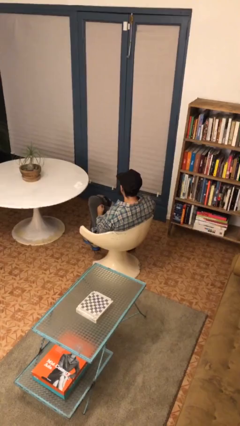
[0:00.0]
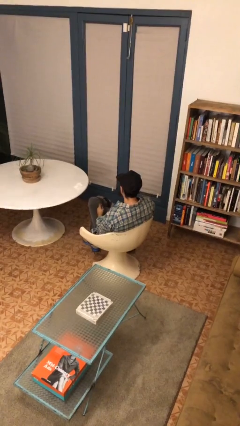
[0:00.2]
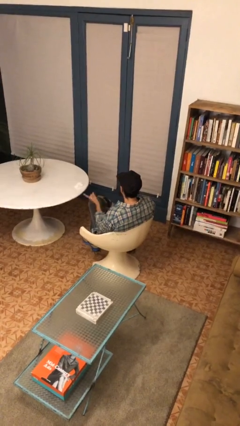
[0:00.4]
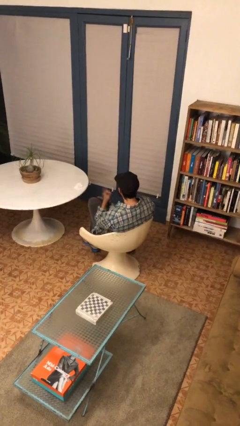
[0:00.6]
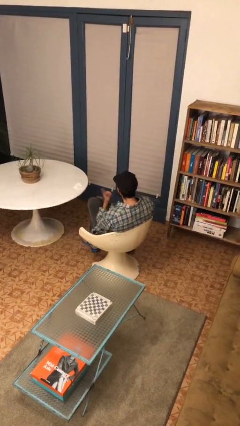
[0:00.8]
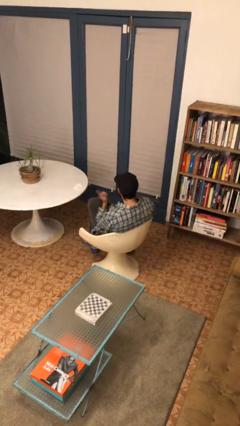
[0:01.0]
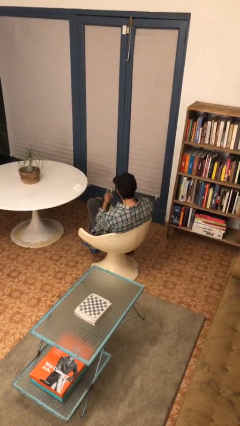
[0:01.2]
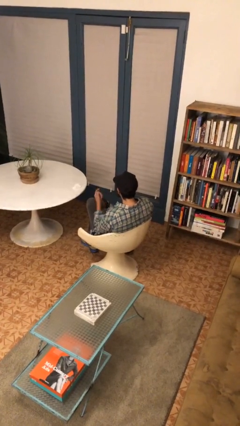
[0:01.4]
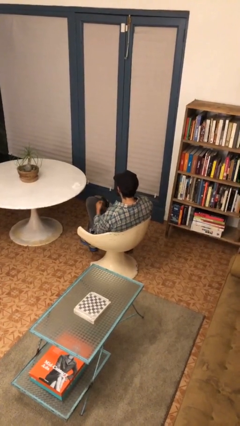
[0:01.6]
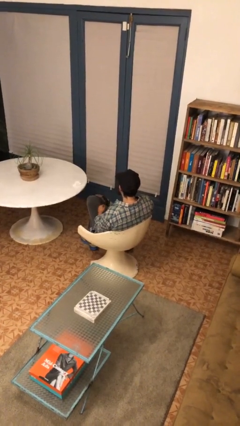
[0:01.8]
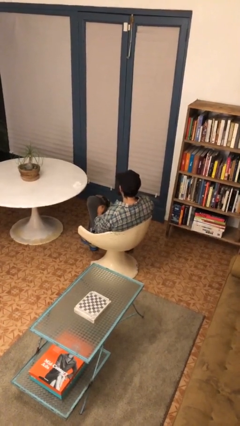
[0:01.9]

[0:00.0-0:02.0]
person gestures listen closely

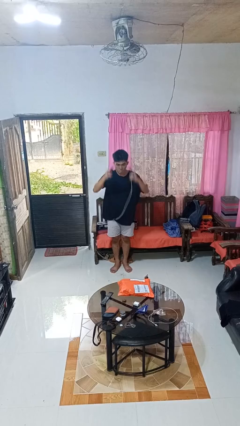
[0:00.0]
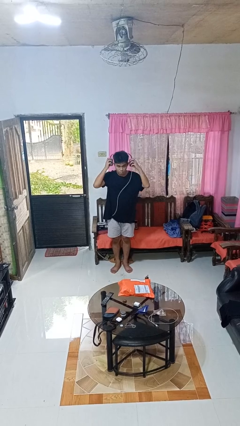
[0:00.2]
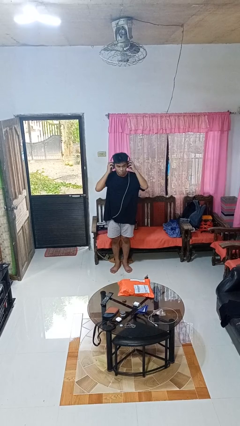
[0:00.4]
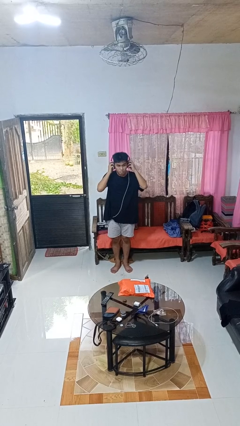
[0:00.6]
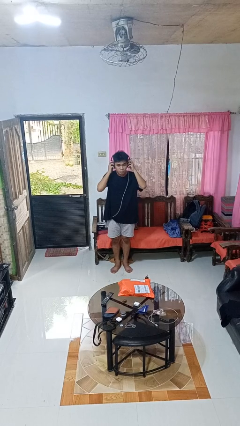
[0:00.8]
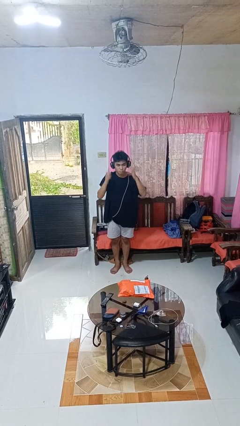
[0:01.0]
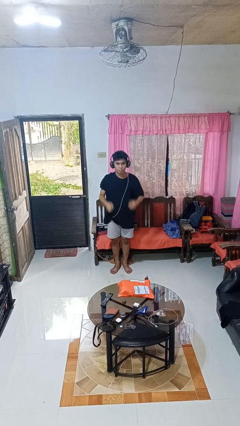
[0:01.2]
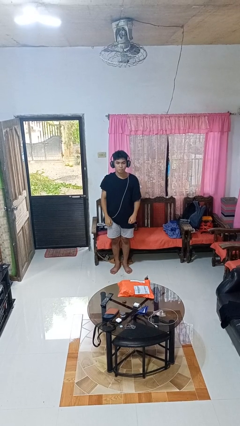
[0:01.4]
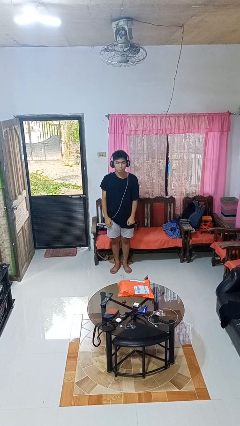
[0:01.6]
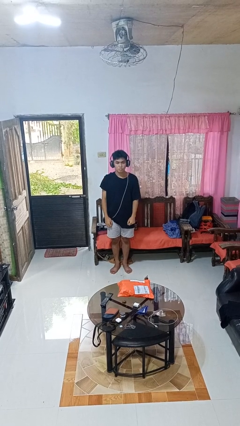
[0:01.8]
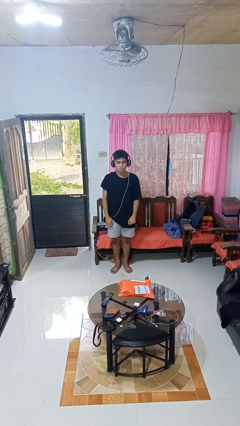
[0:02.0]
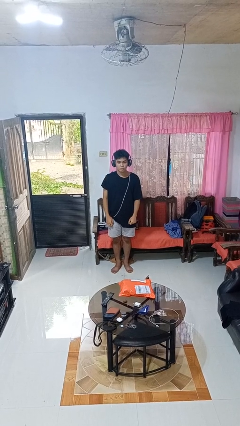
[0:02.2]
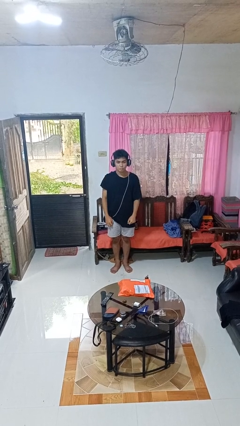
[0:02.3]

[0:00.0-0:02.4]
person puts on headphones

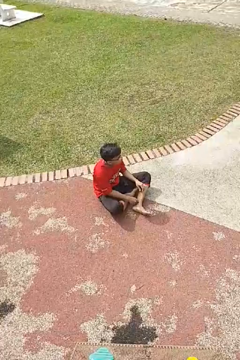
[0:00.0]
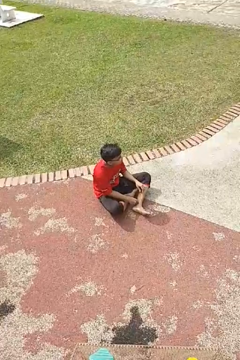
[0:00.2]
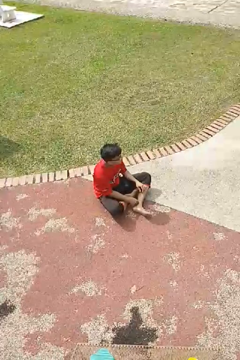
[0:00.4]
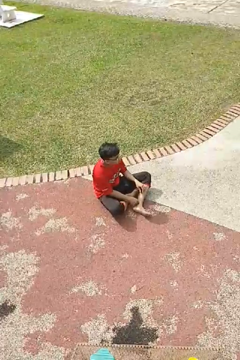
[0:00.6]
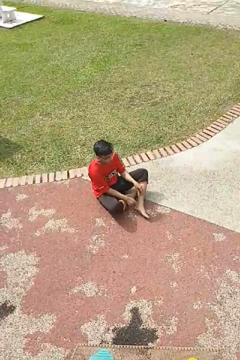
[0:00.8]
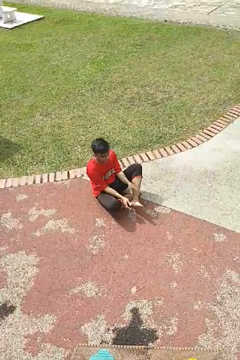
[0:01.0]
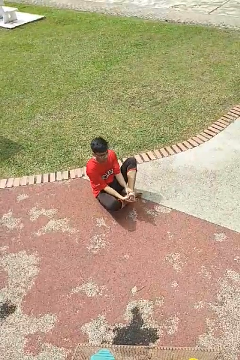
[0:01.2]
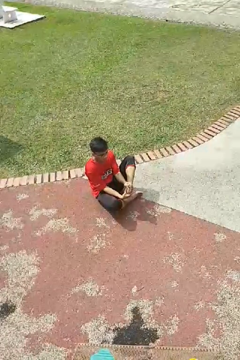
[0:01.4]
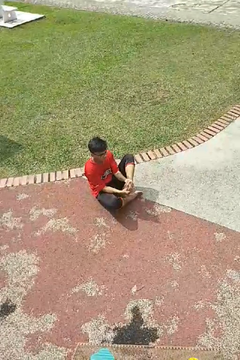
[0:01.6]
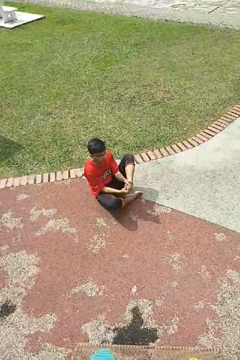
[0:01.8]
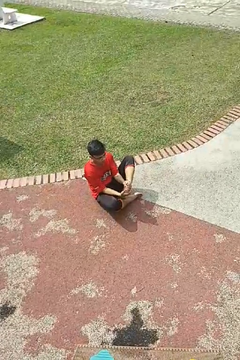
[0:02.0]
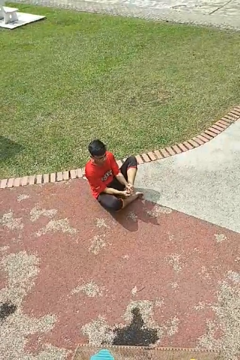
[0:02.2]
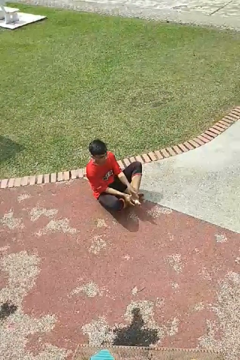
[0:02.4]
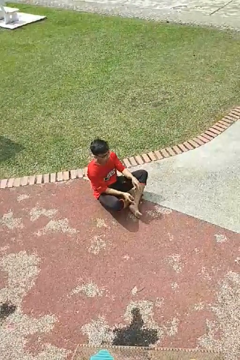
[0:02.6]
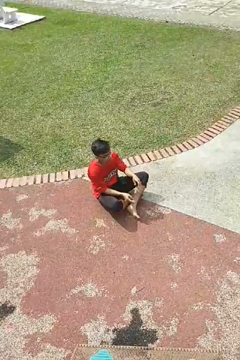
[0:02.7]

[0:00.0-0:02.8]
person rubs foot

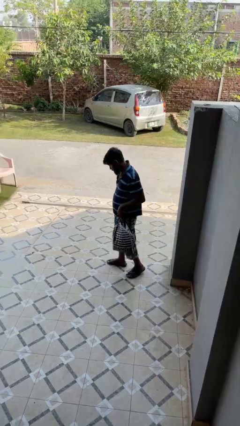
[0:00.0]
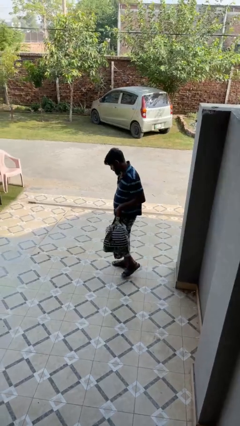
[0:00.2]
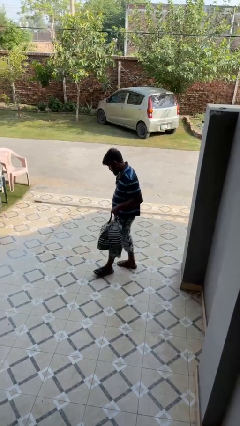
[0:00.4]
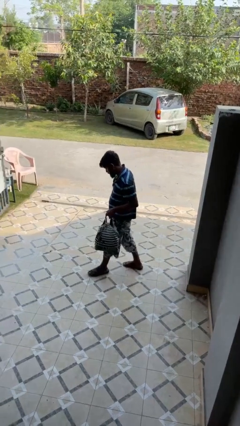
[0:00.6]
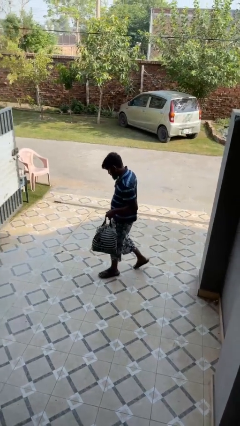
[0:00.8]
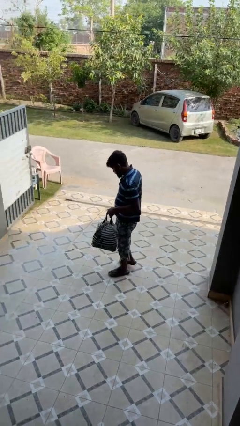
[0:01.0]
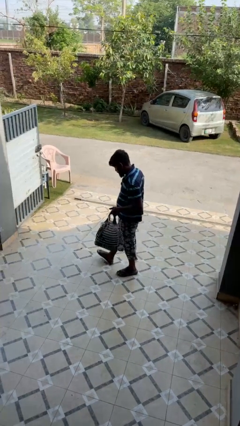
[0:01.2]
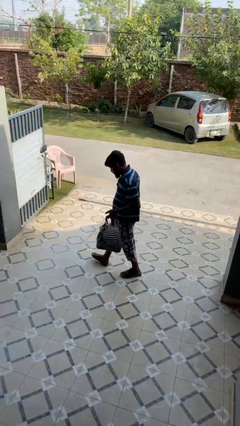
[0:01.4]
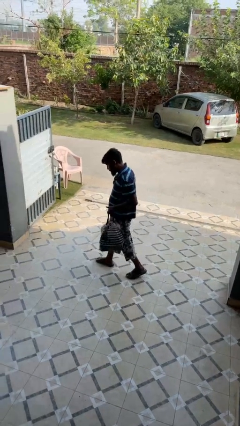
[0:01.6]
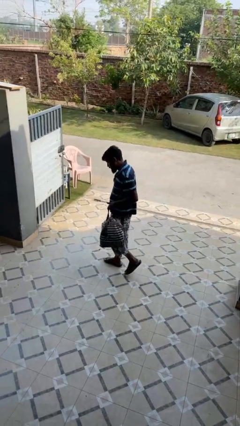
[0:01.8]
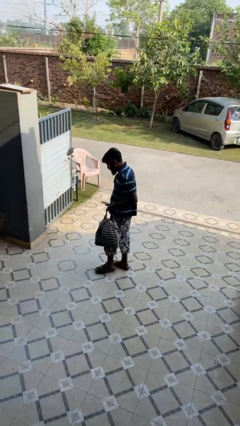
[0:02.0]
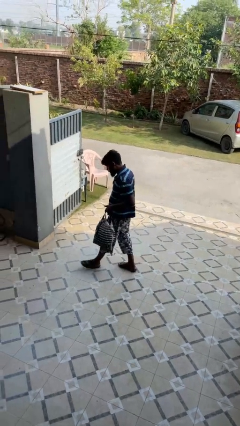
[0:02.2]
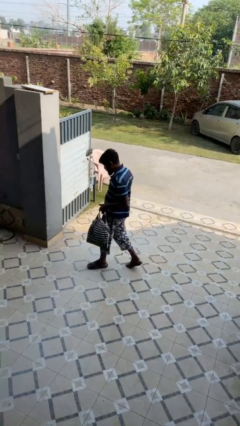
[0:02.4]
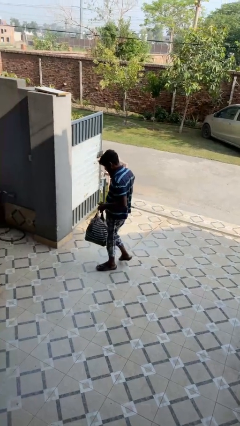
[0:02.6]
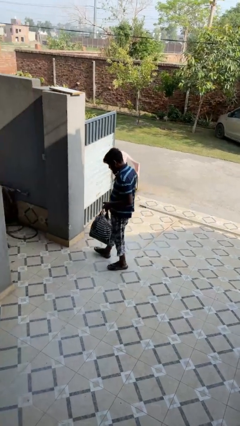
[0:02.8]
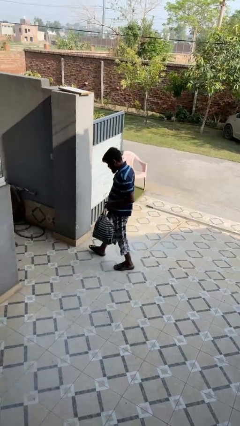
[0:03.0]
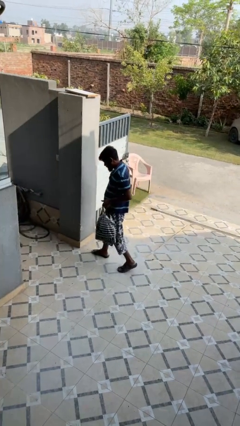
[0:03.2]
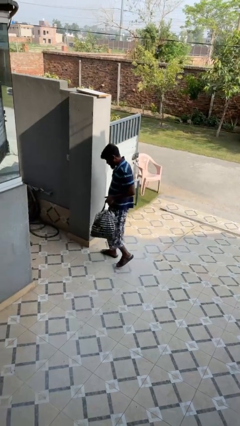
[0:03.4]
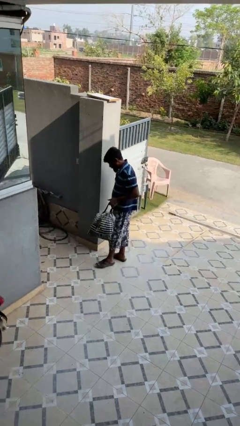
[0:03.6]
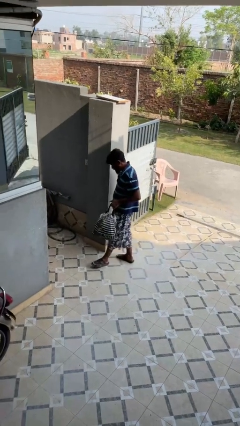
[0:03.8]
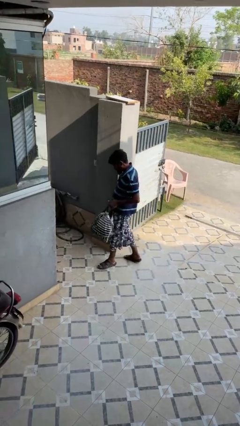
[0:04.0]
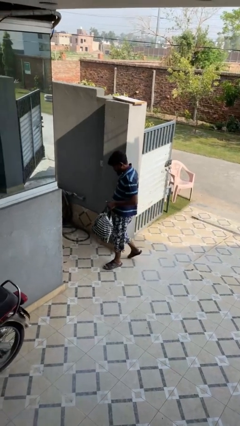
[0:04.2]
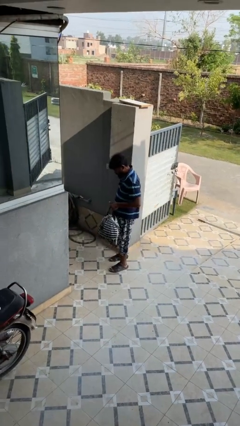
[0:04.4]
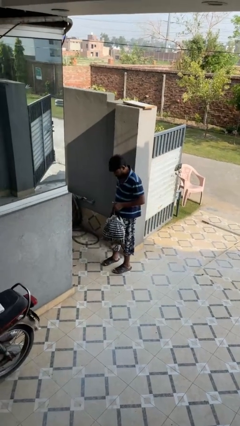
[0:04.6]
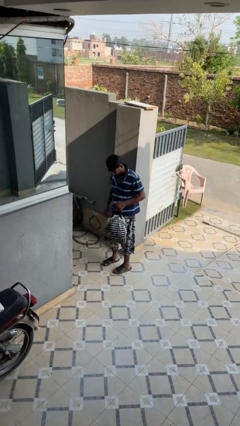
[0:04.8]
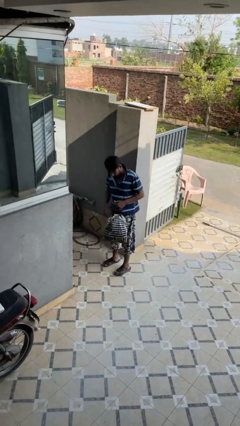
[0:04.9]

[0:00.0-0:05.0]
person carries groceries

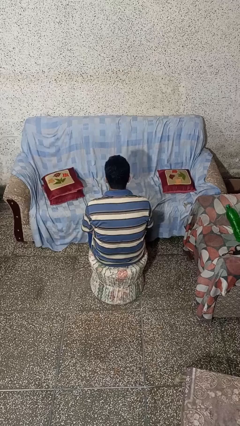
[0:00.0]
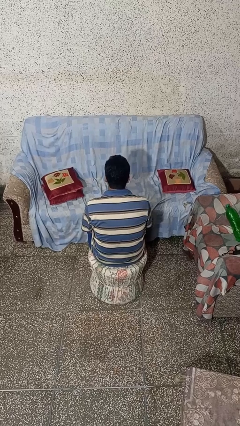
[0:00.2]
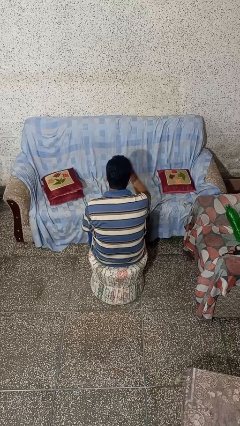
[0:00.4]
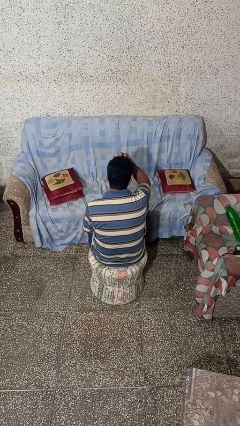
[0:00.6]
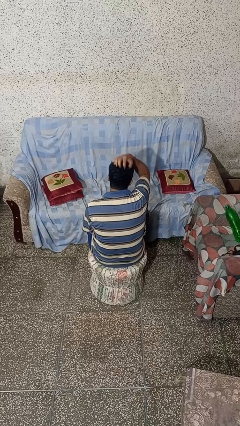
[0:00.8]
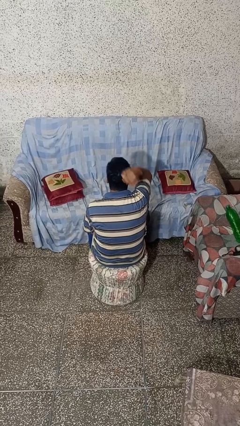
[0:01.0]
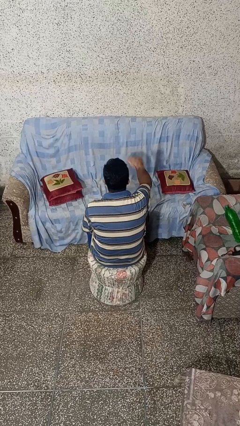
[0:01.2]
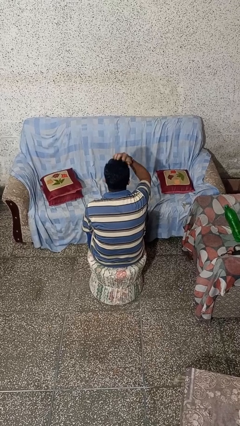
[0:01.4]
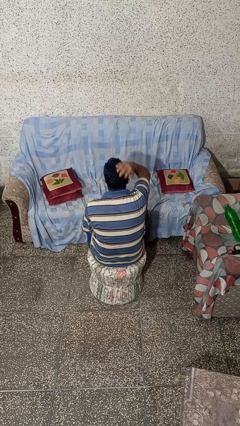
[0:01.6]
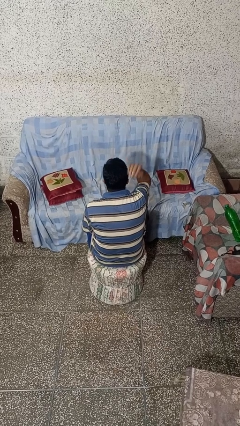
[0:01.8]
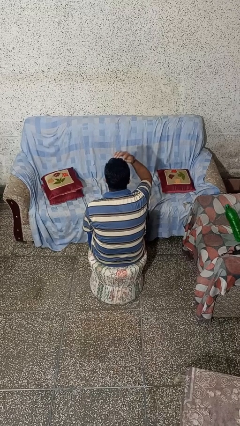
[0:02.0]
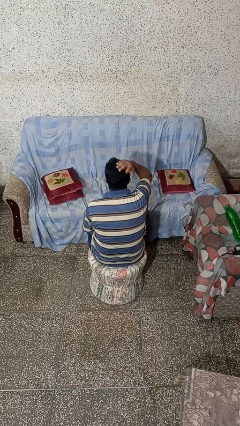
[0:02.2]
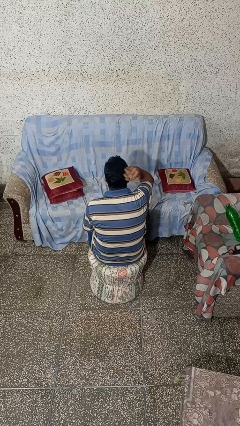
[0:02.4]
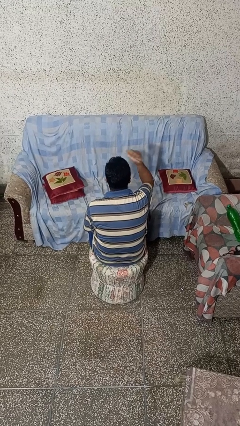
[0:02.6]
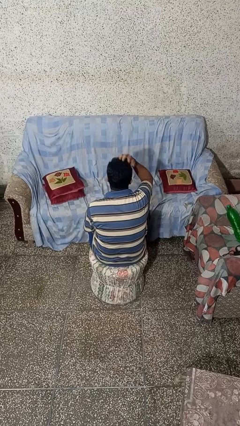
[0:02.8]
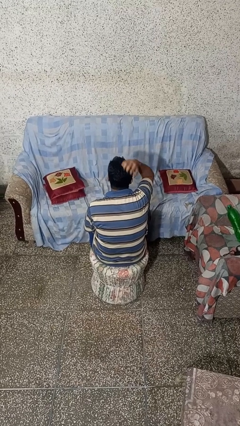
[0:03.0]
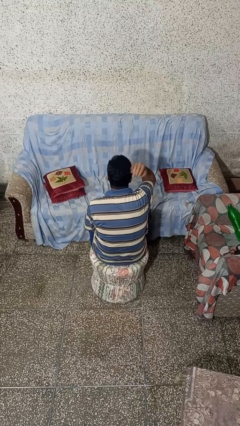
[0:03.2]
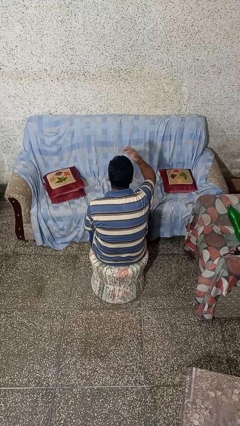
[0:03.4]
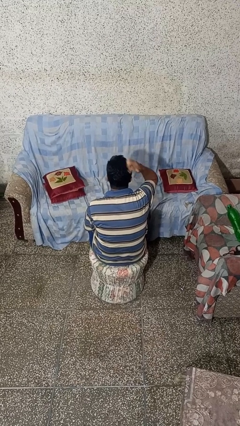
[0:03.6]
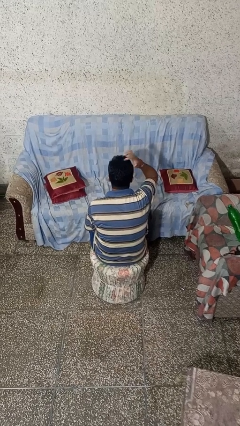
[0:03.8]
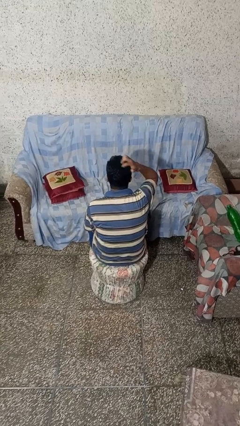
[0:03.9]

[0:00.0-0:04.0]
person strokes hair

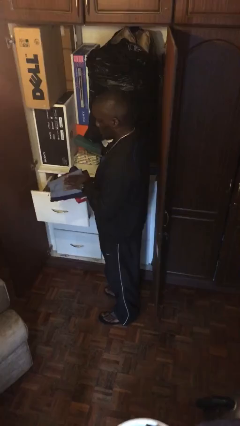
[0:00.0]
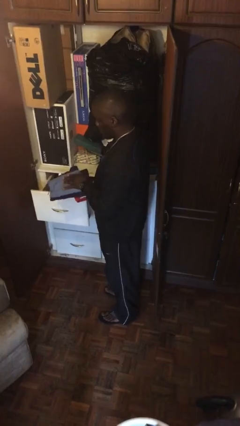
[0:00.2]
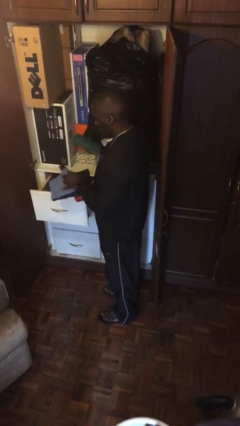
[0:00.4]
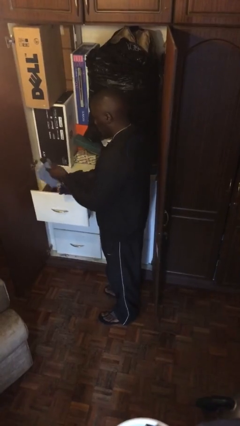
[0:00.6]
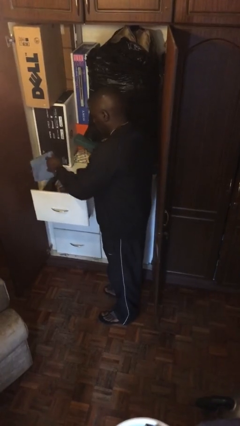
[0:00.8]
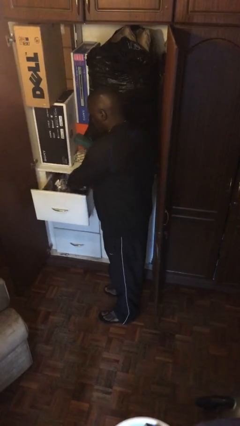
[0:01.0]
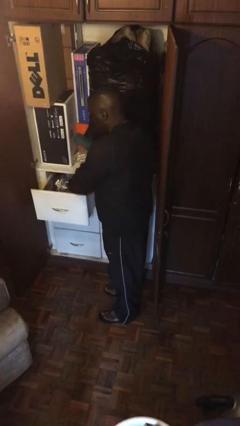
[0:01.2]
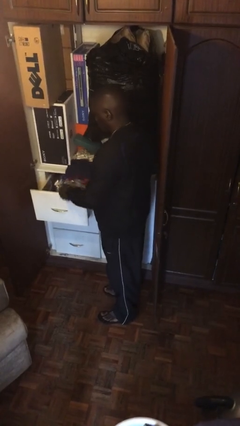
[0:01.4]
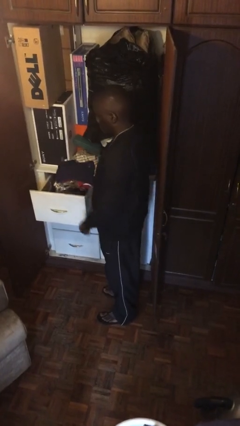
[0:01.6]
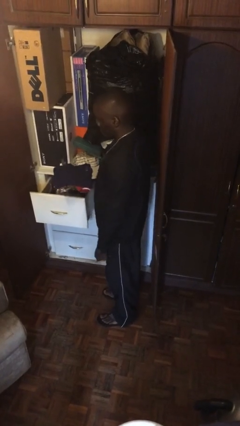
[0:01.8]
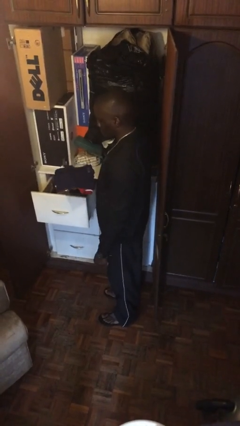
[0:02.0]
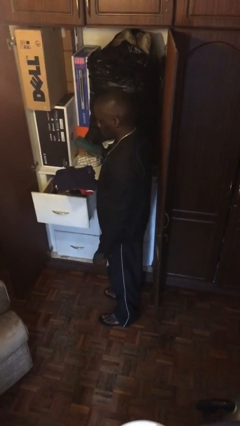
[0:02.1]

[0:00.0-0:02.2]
person puts clothes into dresser
